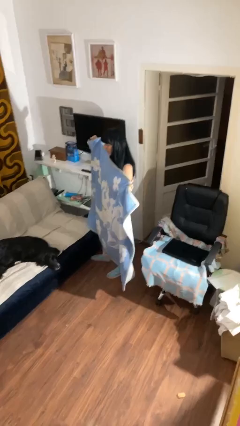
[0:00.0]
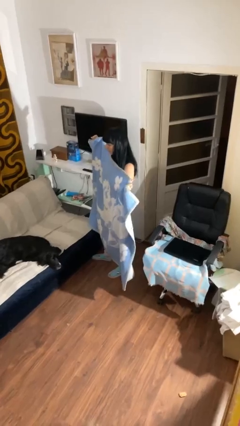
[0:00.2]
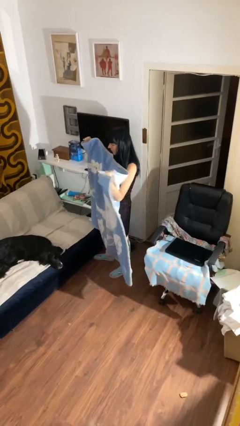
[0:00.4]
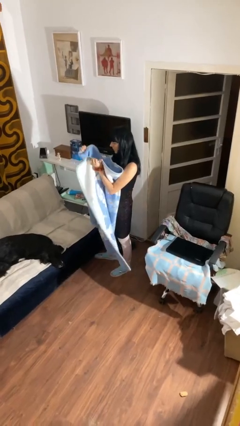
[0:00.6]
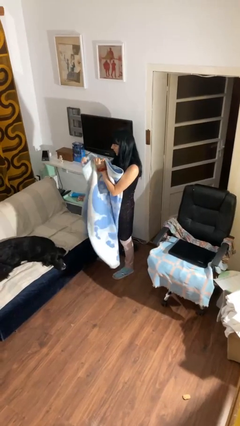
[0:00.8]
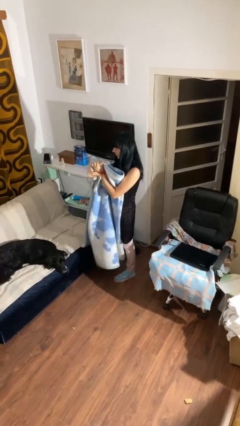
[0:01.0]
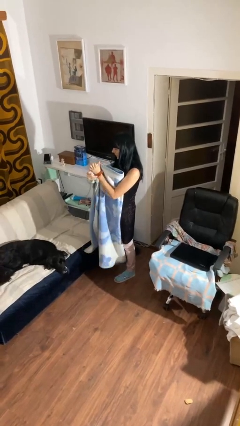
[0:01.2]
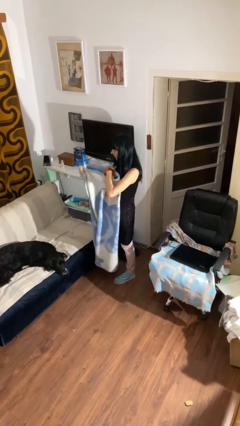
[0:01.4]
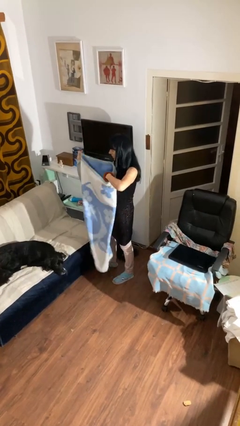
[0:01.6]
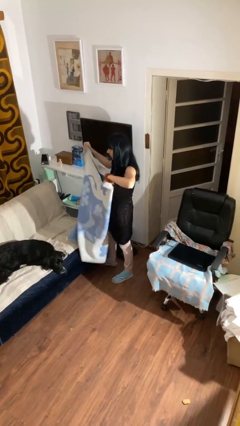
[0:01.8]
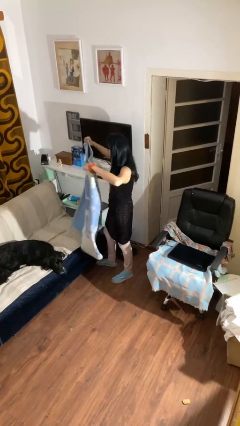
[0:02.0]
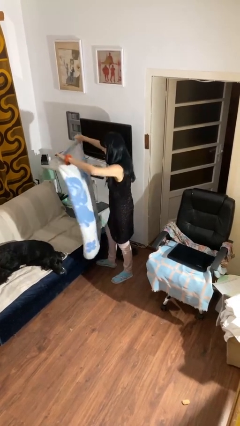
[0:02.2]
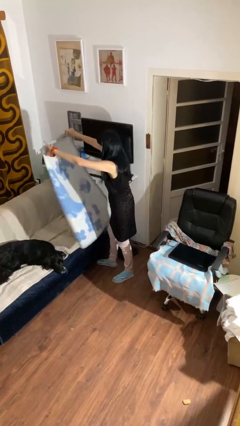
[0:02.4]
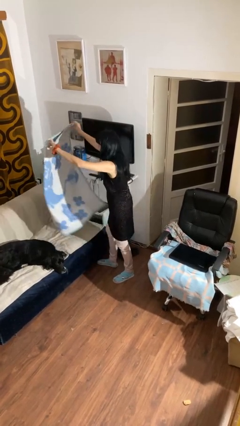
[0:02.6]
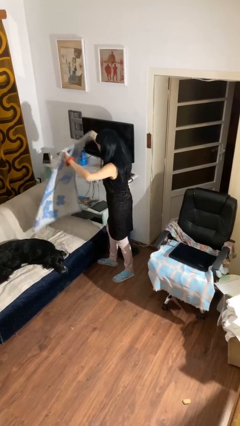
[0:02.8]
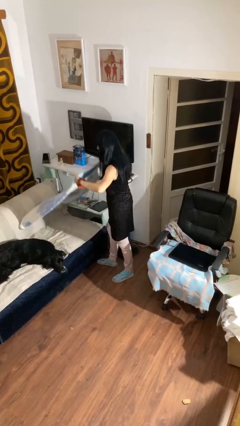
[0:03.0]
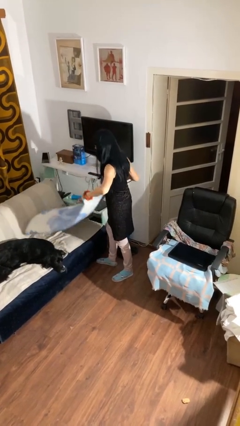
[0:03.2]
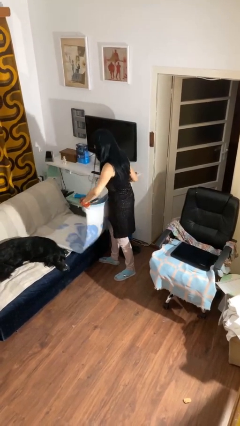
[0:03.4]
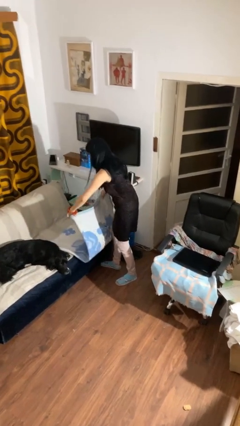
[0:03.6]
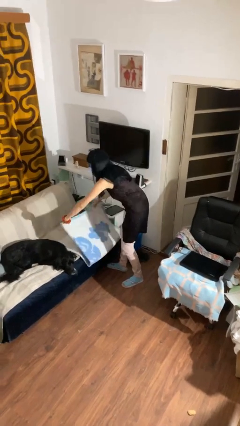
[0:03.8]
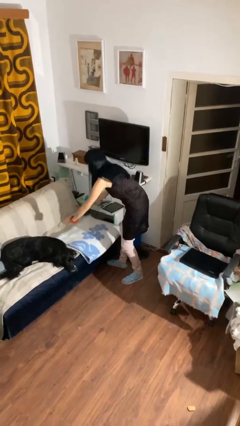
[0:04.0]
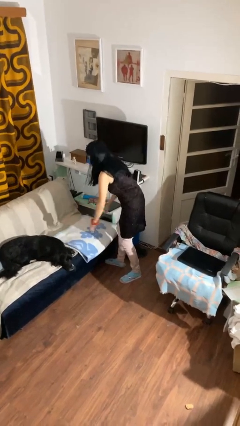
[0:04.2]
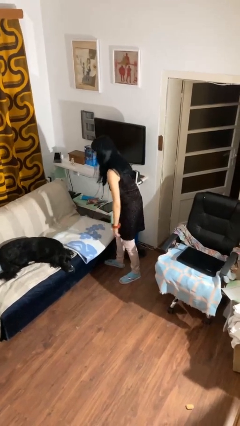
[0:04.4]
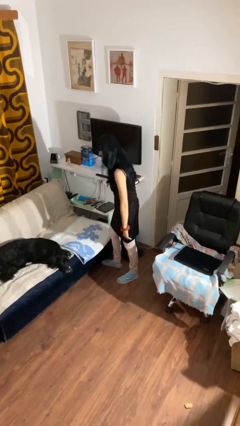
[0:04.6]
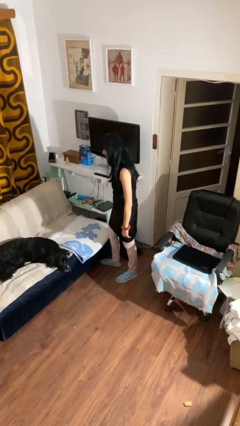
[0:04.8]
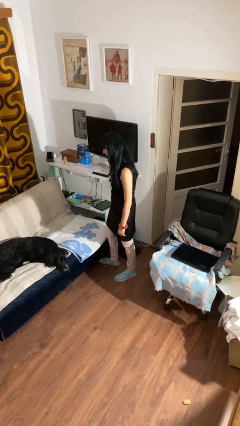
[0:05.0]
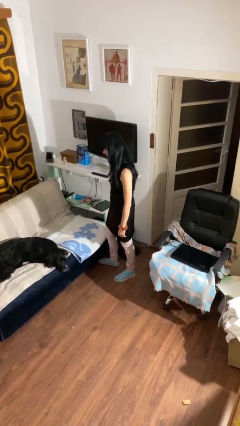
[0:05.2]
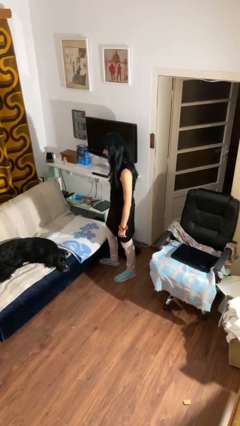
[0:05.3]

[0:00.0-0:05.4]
person folds blanket

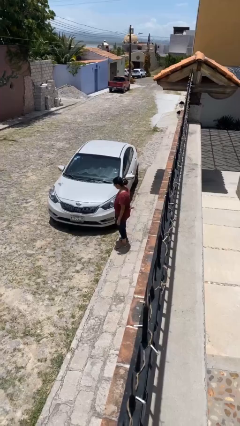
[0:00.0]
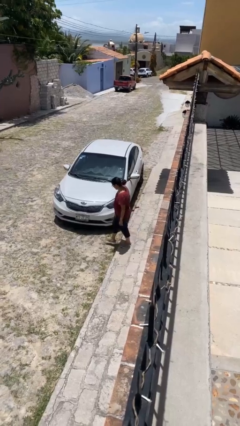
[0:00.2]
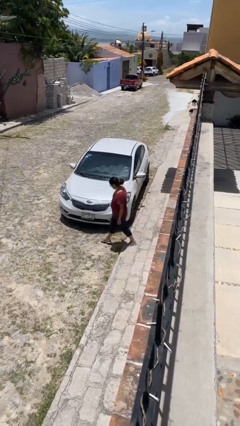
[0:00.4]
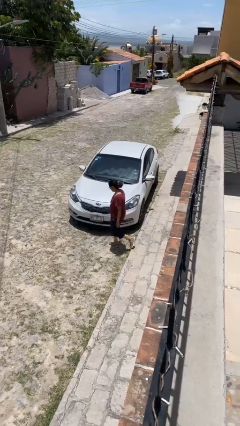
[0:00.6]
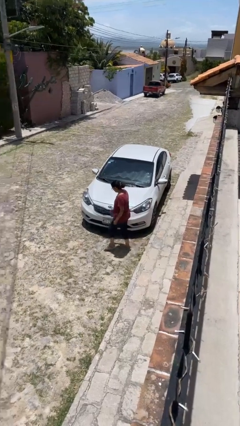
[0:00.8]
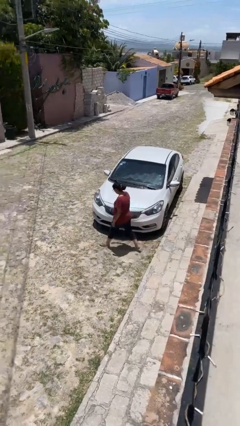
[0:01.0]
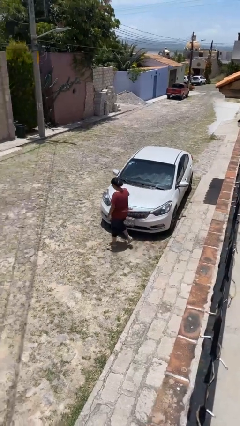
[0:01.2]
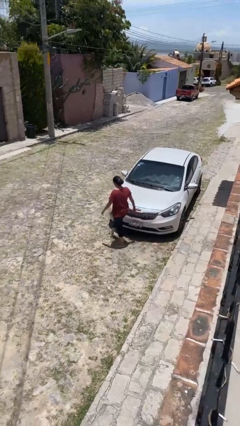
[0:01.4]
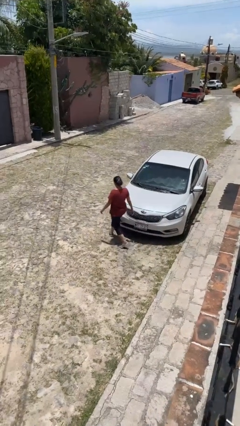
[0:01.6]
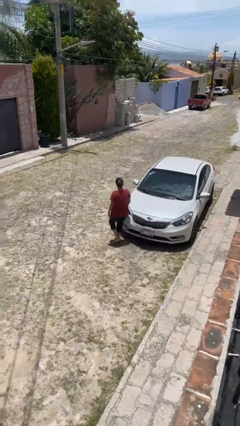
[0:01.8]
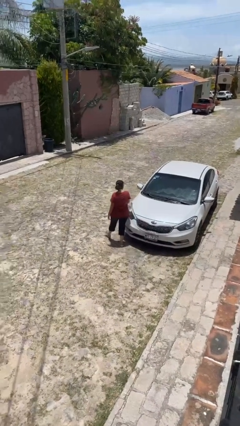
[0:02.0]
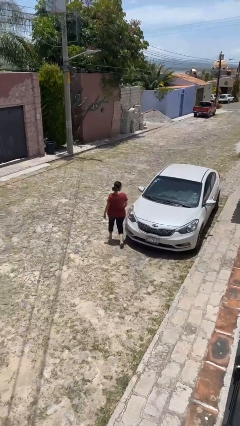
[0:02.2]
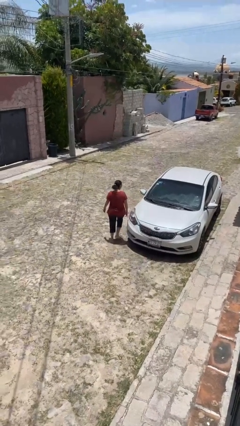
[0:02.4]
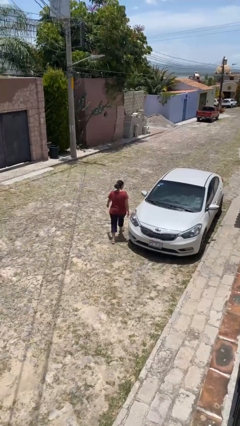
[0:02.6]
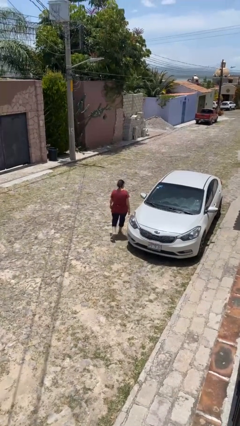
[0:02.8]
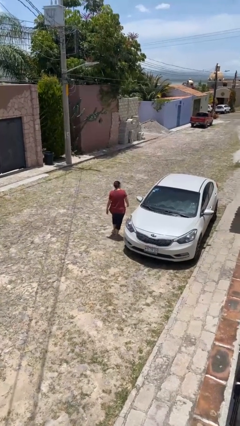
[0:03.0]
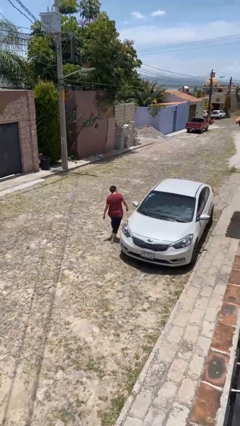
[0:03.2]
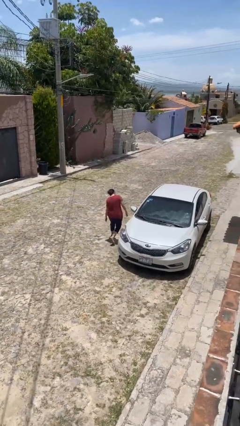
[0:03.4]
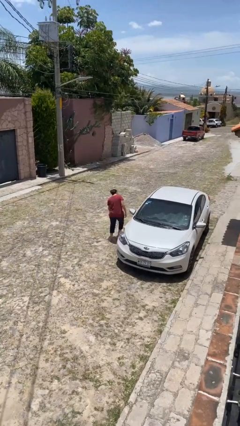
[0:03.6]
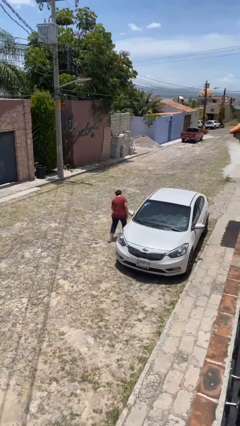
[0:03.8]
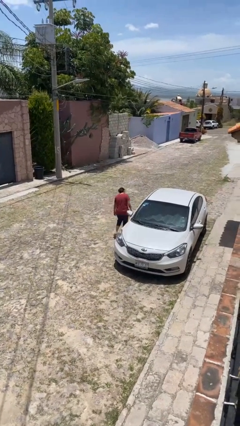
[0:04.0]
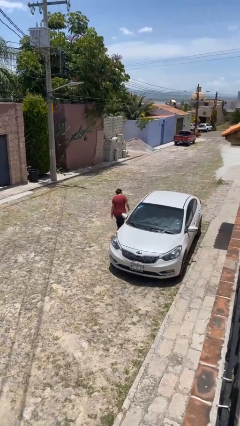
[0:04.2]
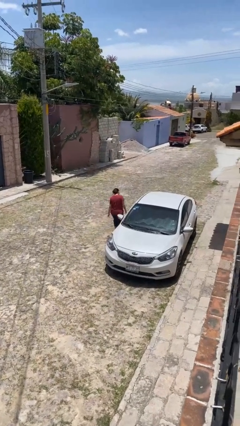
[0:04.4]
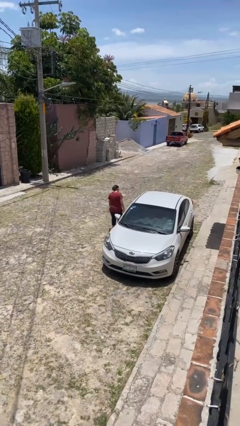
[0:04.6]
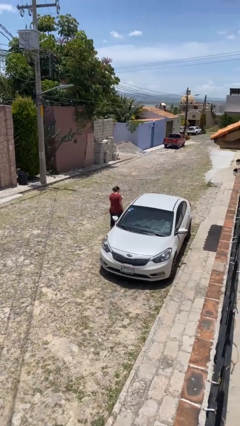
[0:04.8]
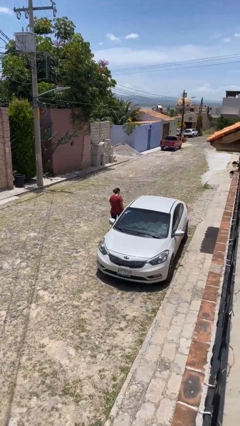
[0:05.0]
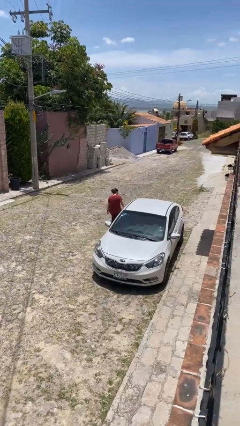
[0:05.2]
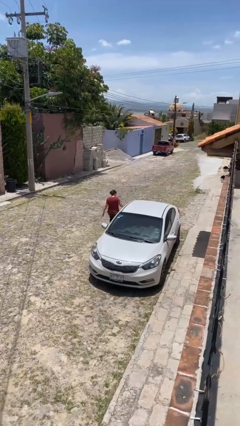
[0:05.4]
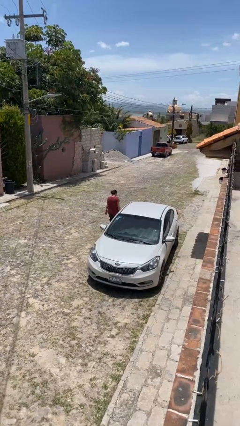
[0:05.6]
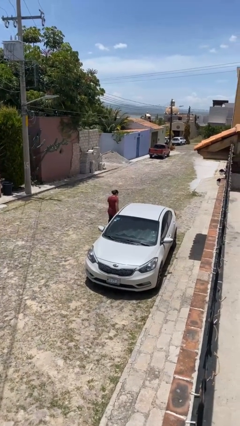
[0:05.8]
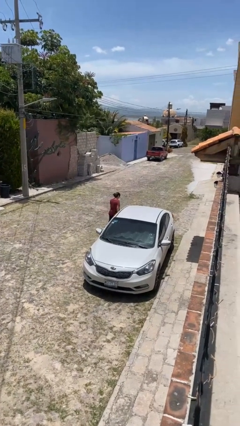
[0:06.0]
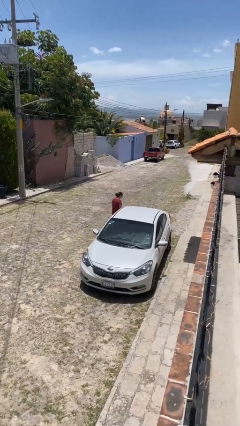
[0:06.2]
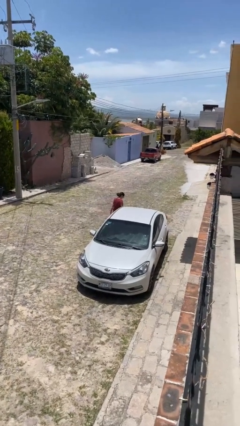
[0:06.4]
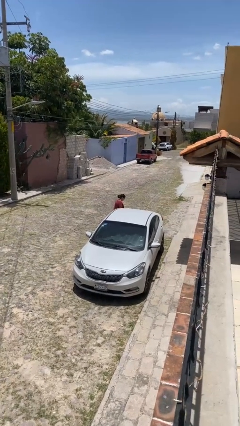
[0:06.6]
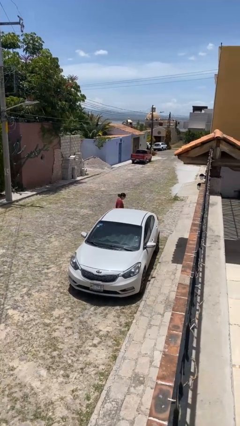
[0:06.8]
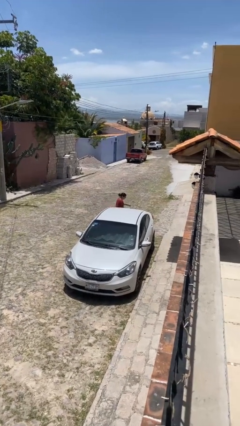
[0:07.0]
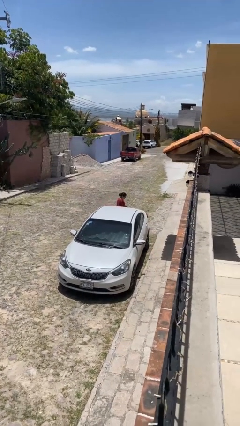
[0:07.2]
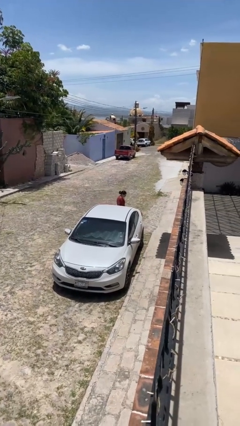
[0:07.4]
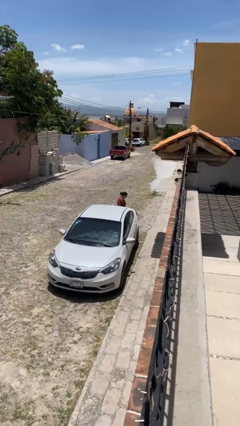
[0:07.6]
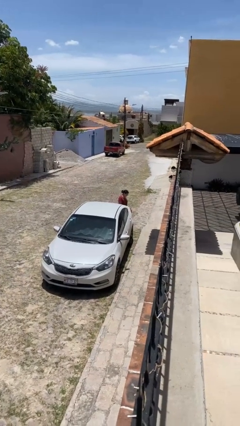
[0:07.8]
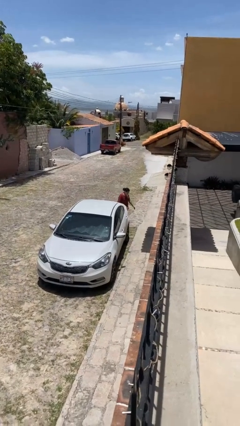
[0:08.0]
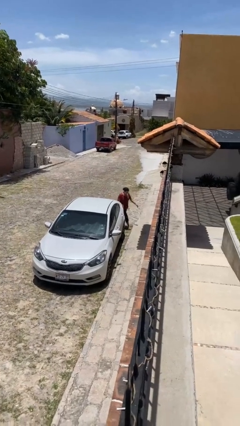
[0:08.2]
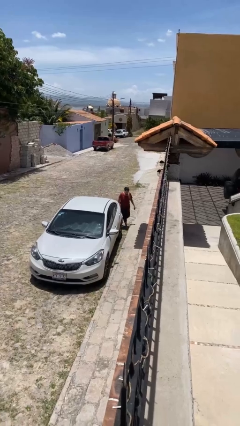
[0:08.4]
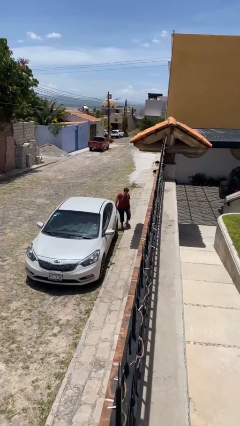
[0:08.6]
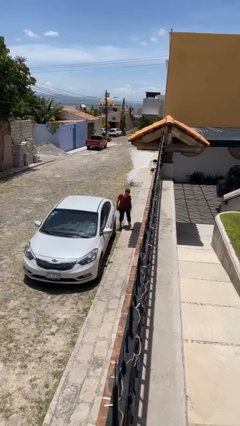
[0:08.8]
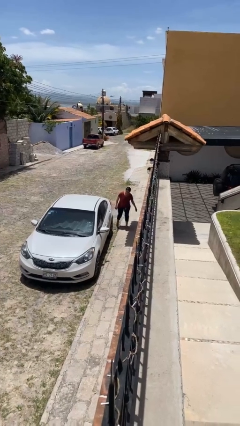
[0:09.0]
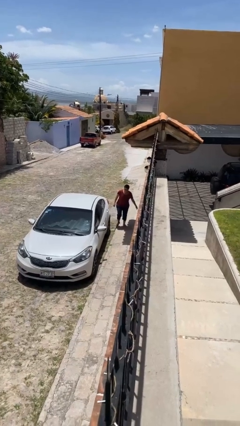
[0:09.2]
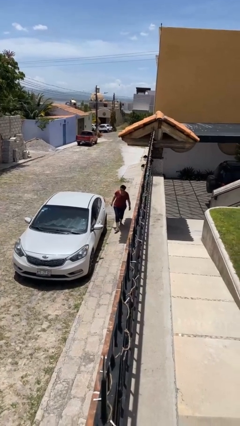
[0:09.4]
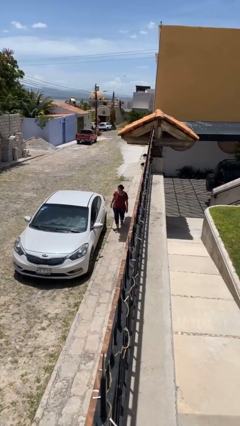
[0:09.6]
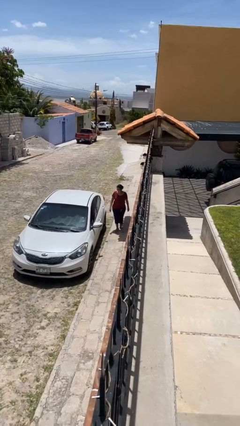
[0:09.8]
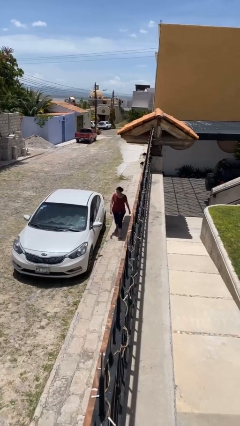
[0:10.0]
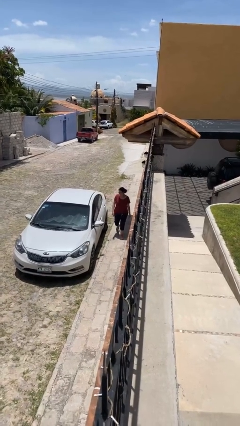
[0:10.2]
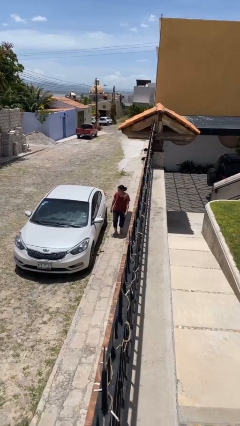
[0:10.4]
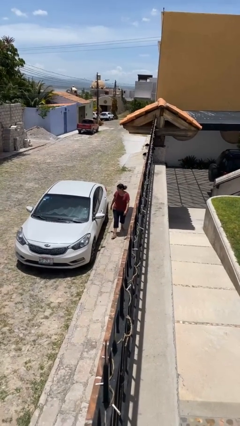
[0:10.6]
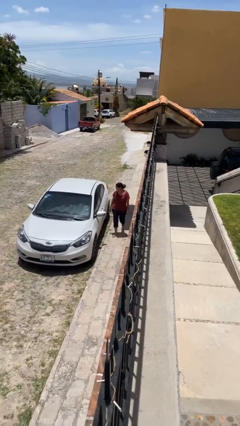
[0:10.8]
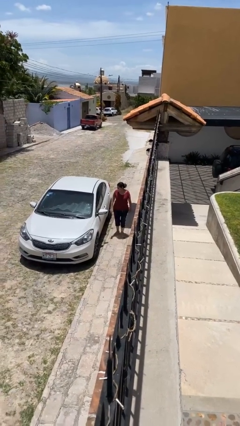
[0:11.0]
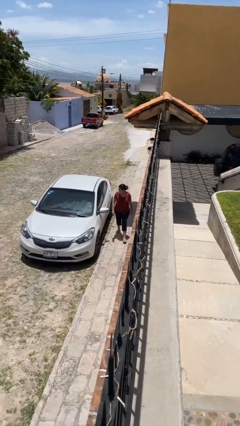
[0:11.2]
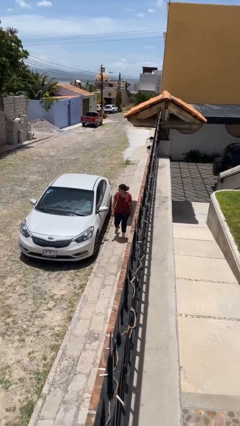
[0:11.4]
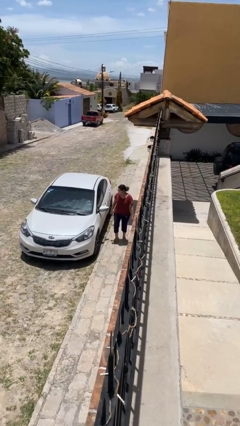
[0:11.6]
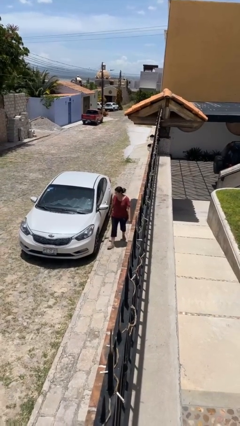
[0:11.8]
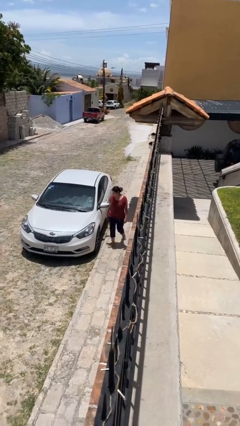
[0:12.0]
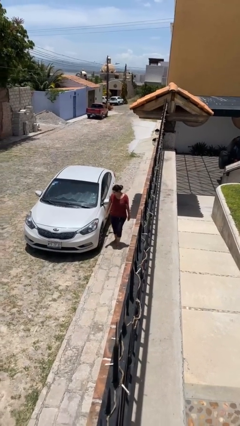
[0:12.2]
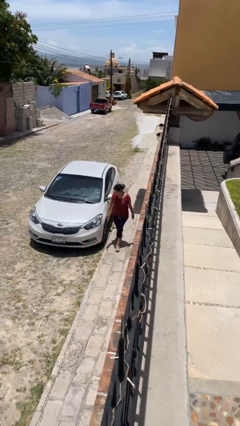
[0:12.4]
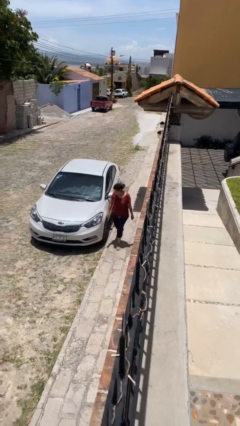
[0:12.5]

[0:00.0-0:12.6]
person walks around car
